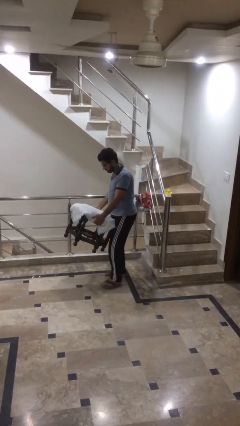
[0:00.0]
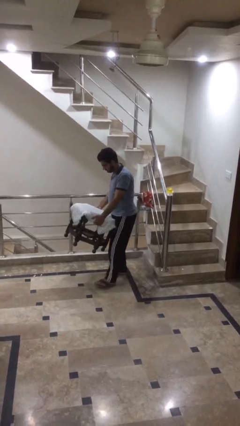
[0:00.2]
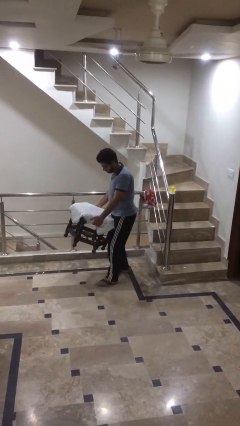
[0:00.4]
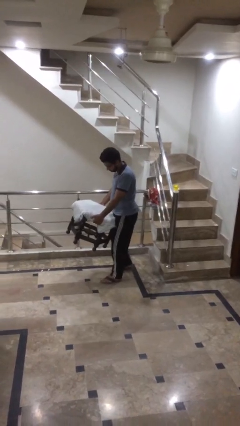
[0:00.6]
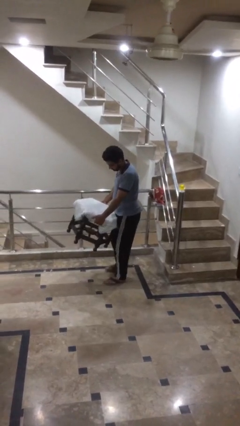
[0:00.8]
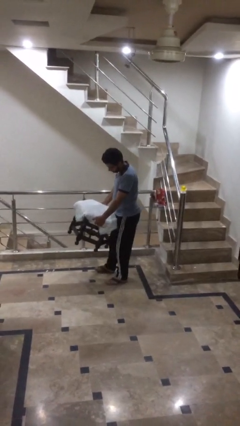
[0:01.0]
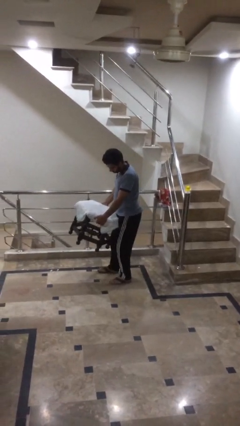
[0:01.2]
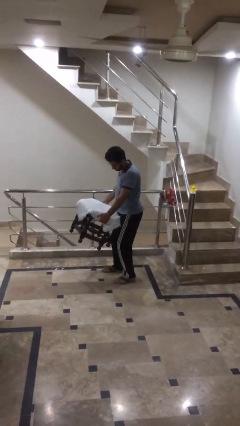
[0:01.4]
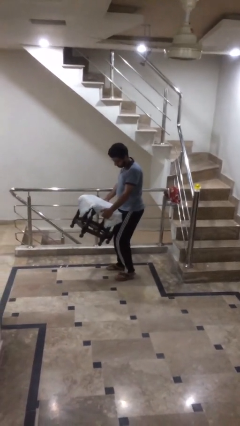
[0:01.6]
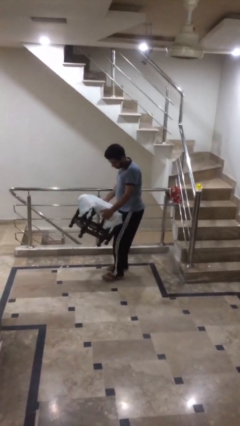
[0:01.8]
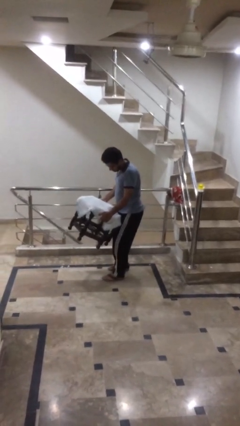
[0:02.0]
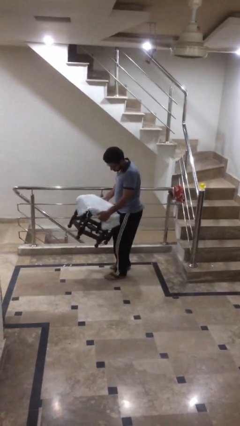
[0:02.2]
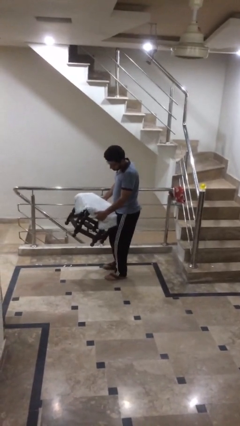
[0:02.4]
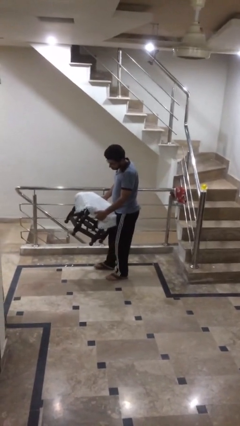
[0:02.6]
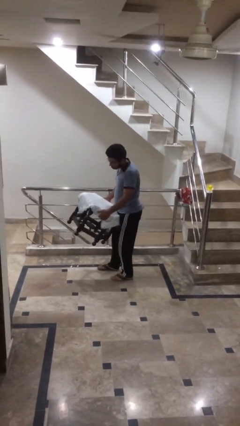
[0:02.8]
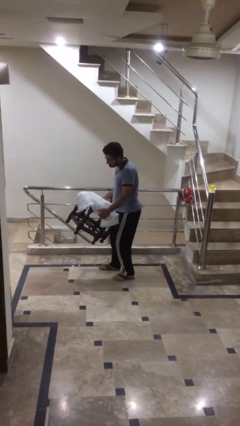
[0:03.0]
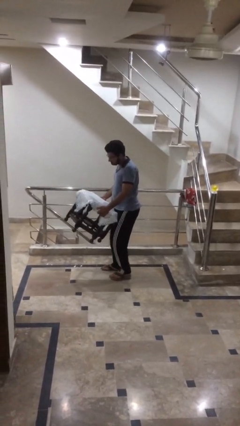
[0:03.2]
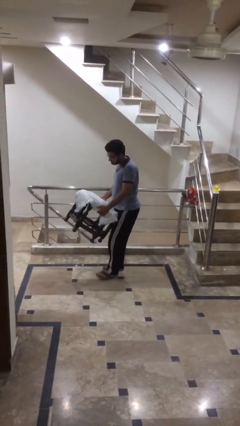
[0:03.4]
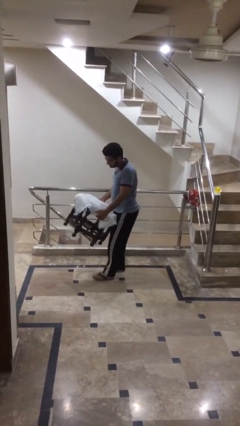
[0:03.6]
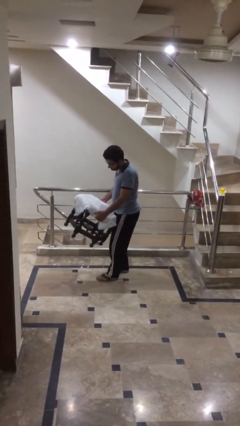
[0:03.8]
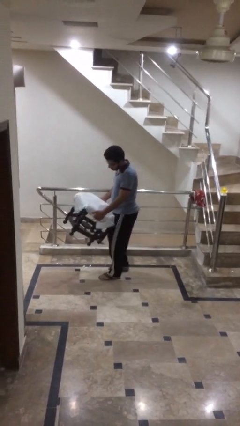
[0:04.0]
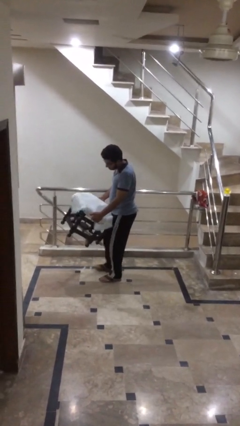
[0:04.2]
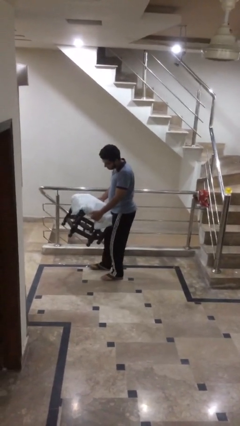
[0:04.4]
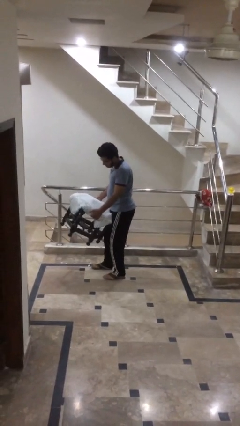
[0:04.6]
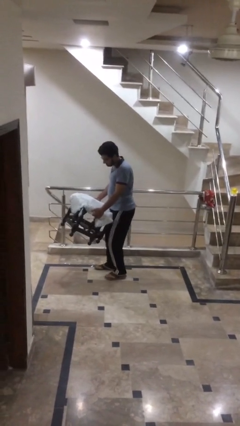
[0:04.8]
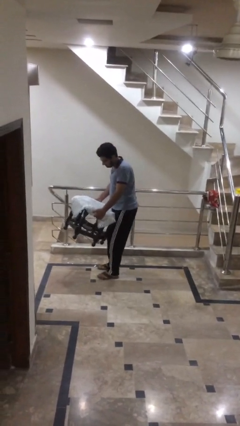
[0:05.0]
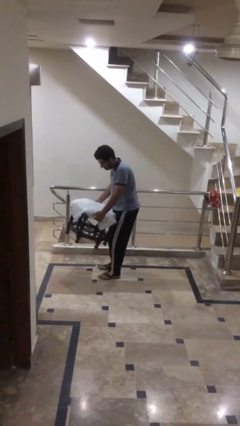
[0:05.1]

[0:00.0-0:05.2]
person carries heavy object

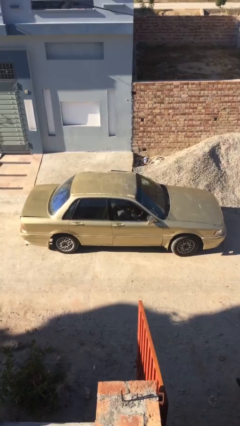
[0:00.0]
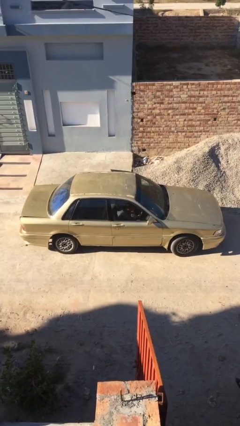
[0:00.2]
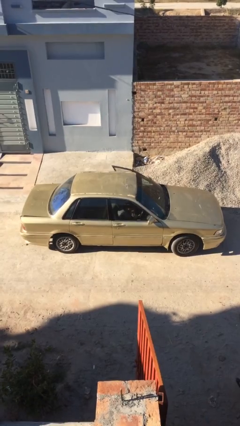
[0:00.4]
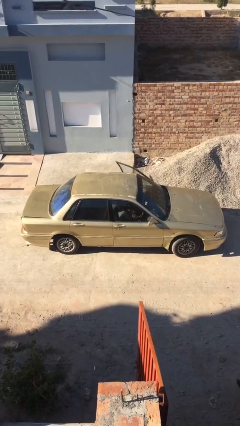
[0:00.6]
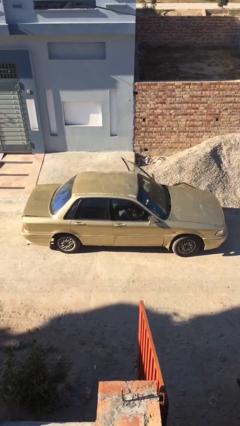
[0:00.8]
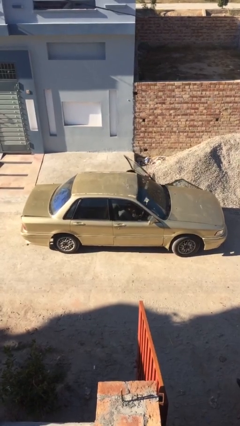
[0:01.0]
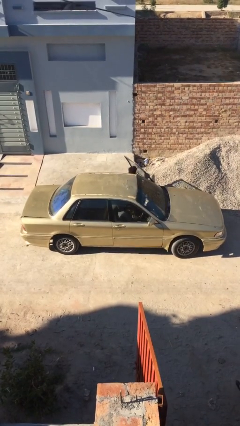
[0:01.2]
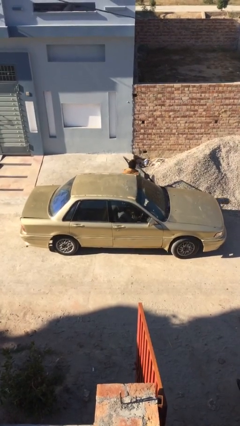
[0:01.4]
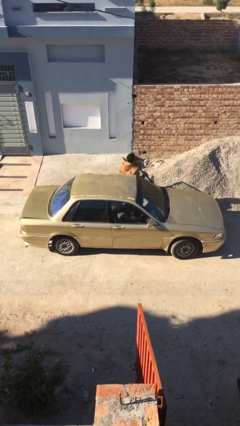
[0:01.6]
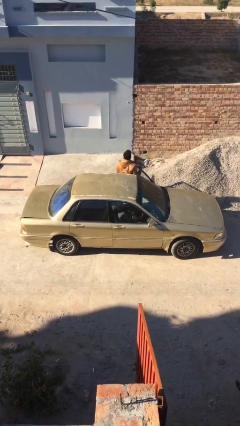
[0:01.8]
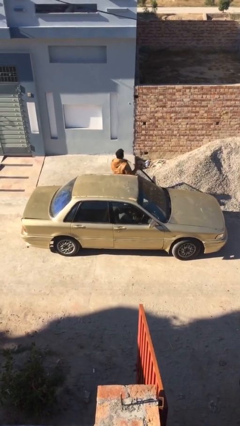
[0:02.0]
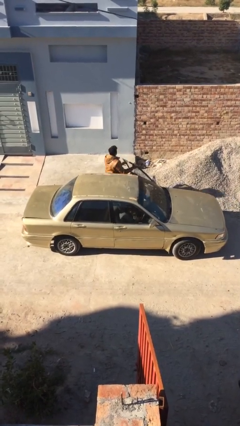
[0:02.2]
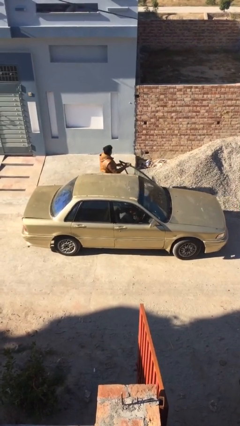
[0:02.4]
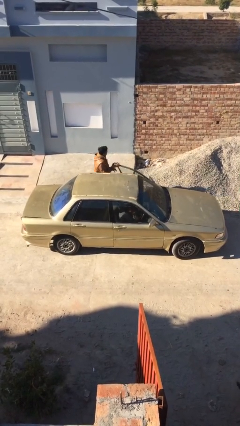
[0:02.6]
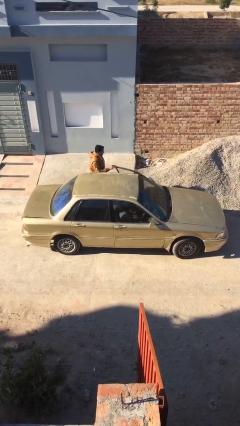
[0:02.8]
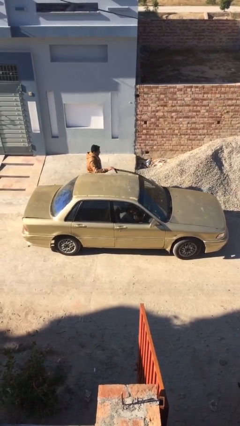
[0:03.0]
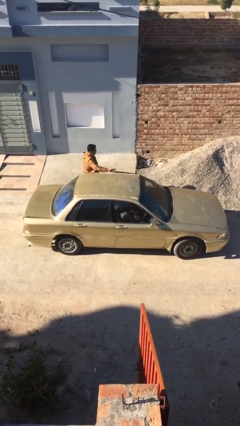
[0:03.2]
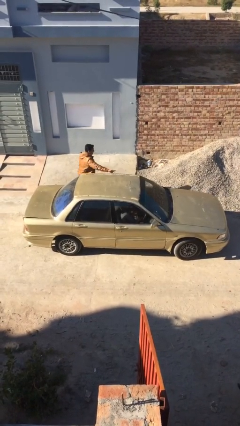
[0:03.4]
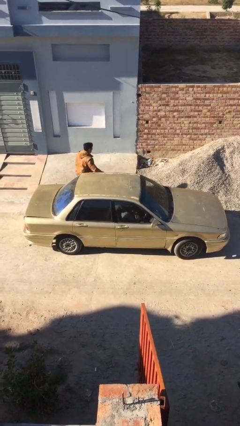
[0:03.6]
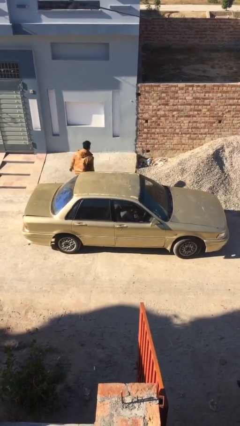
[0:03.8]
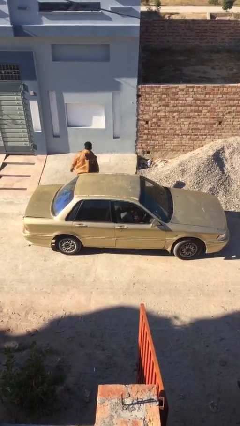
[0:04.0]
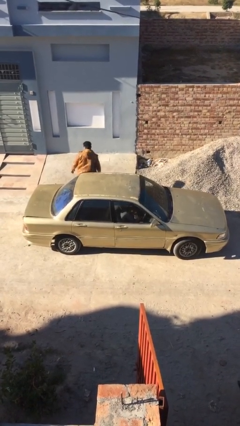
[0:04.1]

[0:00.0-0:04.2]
car drops off person

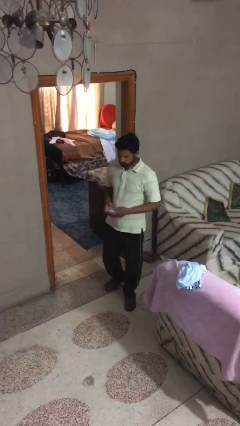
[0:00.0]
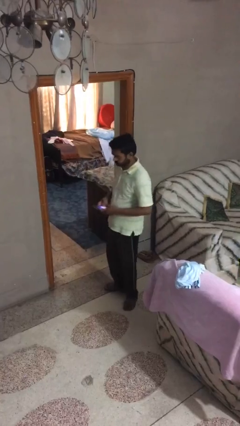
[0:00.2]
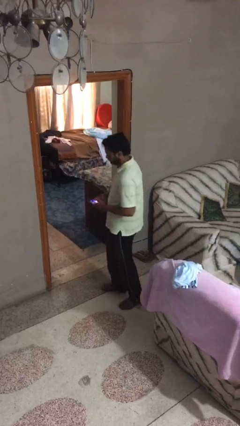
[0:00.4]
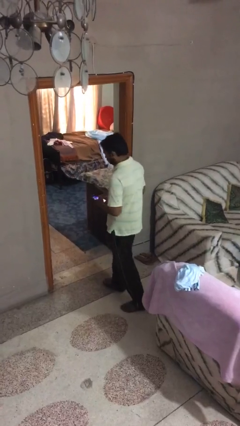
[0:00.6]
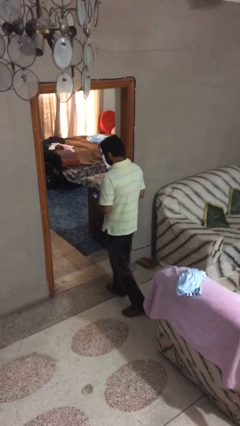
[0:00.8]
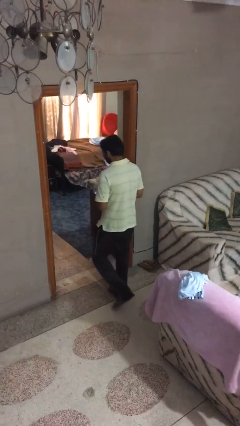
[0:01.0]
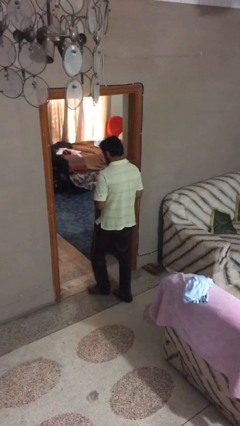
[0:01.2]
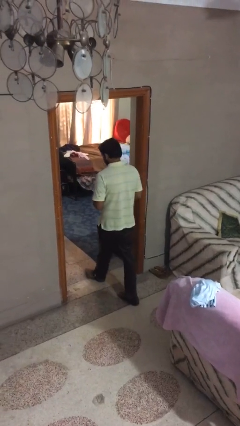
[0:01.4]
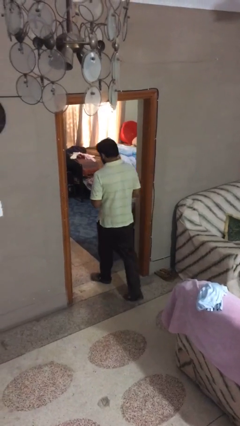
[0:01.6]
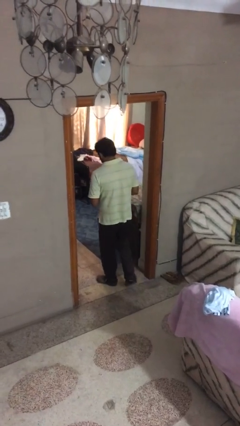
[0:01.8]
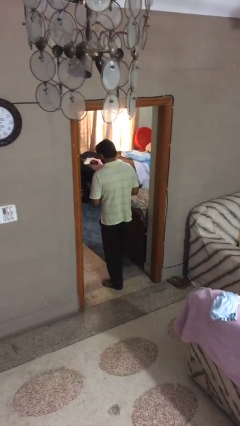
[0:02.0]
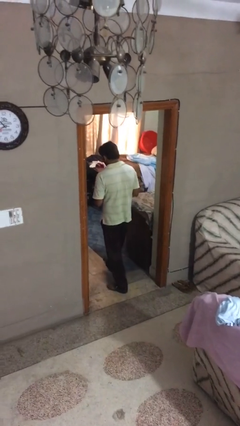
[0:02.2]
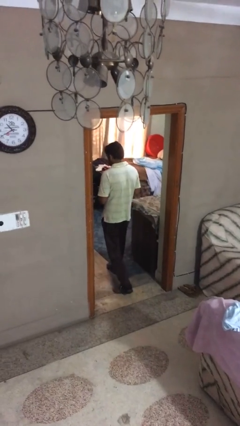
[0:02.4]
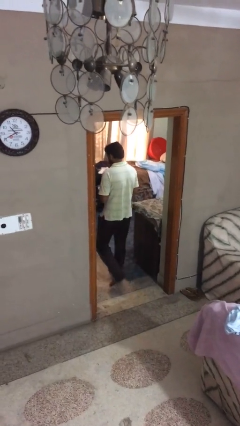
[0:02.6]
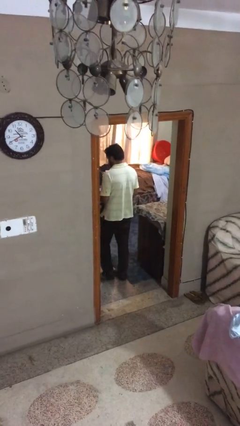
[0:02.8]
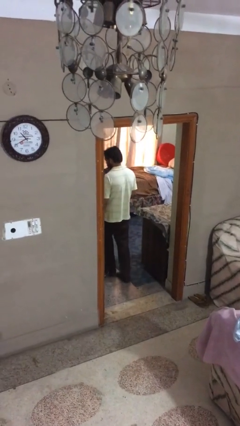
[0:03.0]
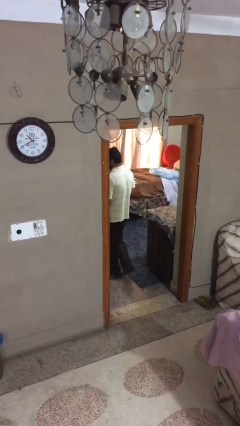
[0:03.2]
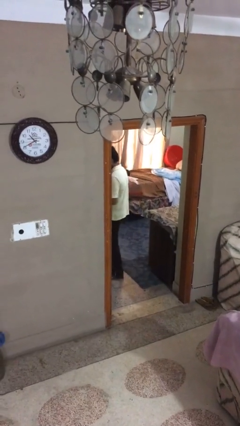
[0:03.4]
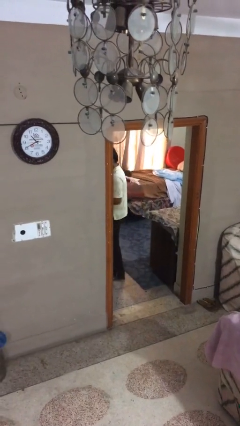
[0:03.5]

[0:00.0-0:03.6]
person exits scene through structure

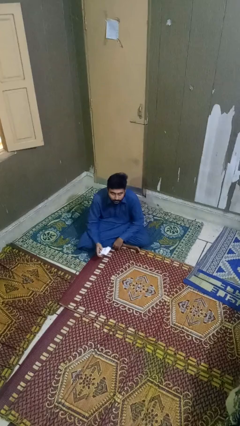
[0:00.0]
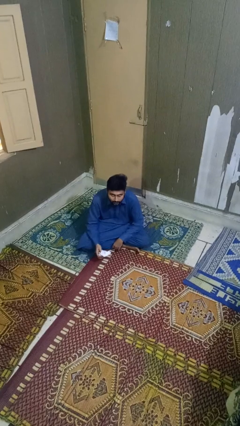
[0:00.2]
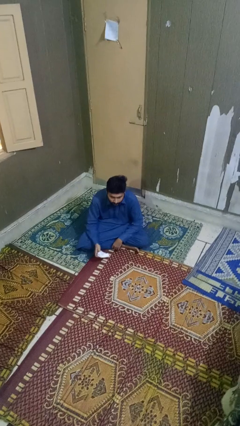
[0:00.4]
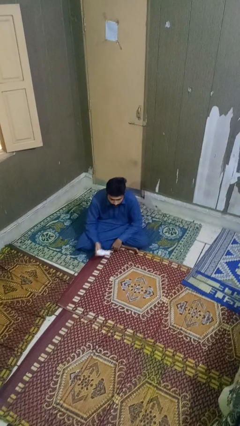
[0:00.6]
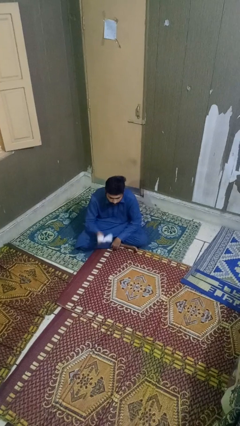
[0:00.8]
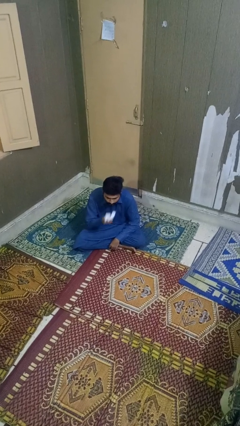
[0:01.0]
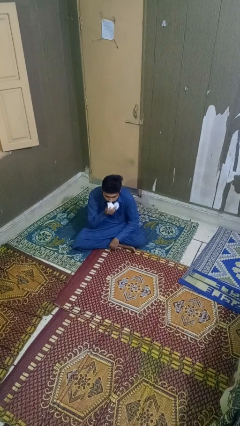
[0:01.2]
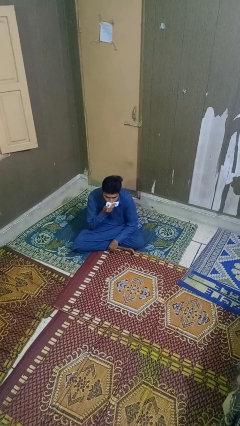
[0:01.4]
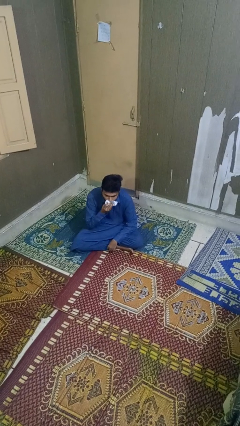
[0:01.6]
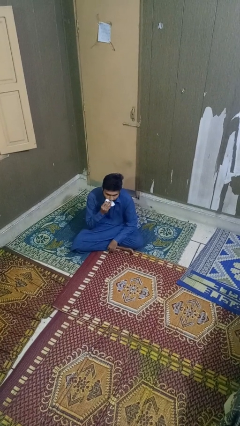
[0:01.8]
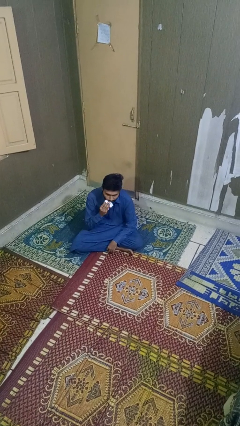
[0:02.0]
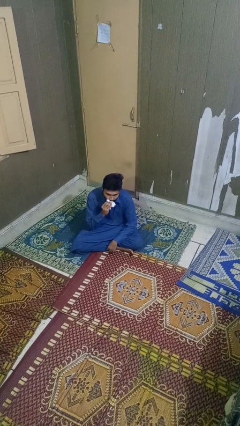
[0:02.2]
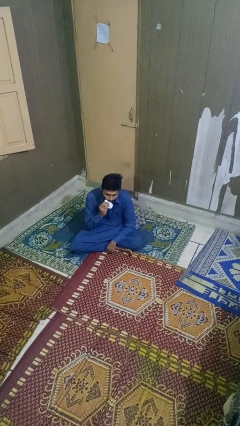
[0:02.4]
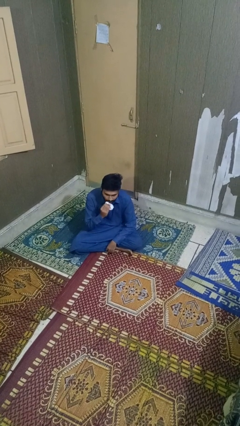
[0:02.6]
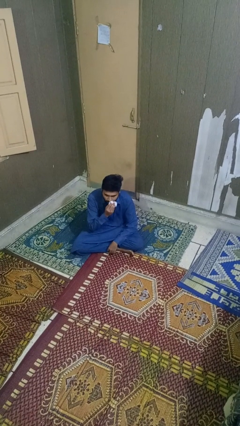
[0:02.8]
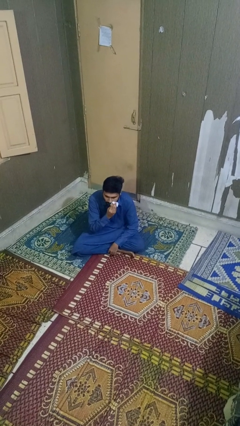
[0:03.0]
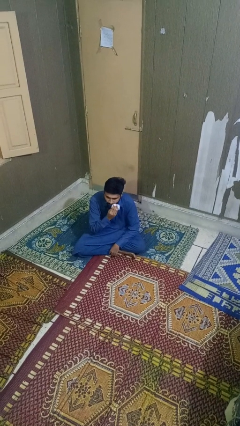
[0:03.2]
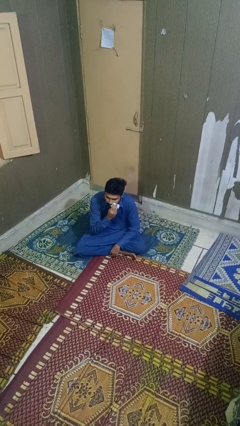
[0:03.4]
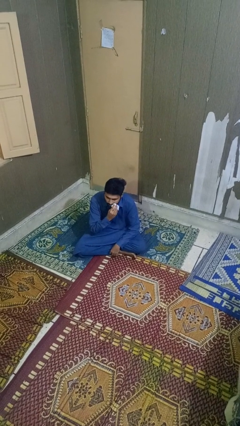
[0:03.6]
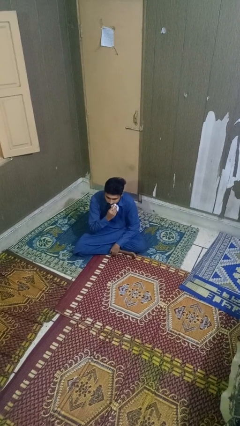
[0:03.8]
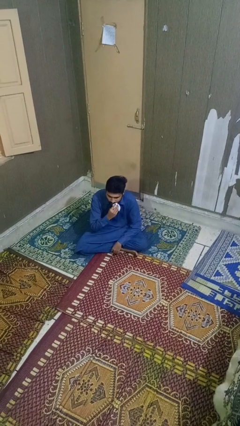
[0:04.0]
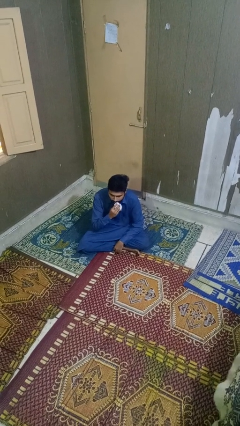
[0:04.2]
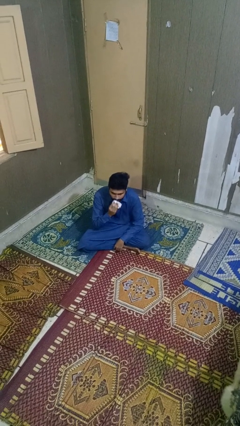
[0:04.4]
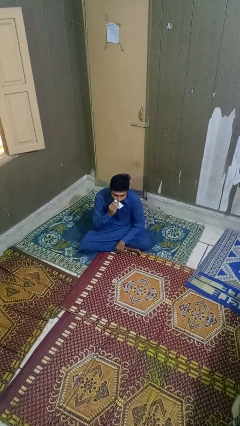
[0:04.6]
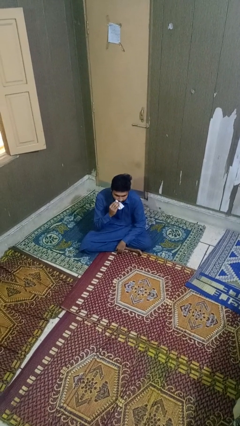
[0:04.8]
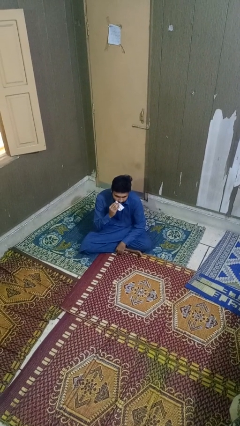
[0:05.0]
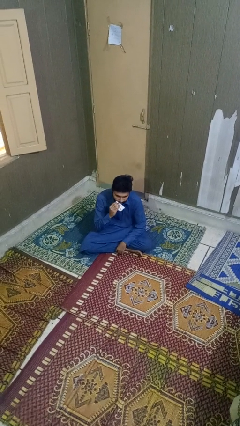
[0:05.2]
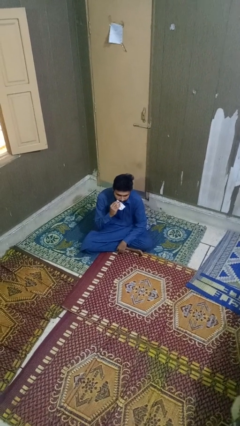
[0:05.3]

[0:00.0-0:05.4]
person wipes mouth with napkin
